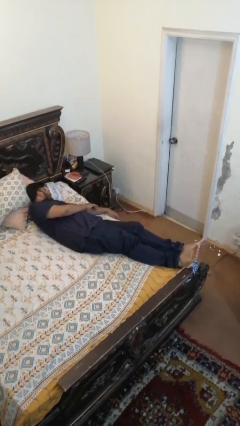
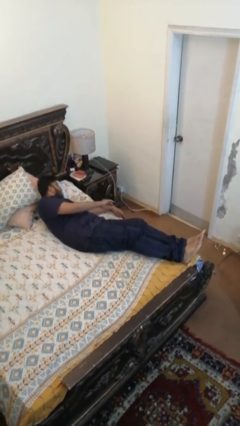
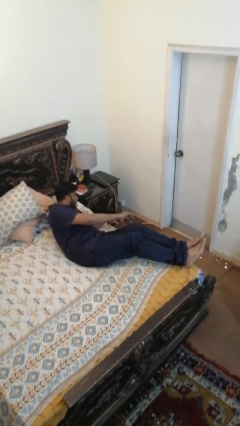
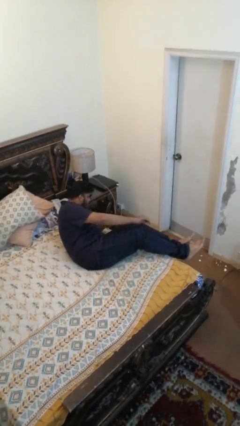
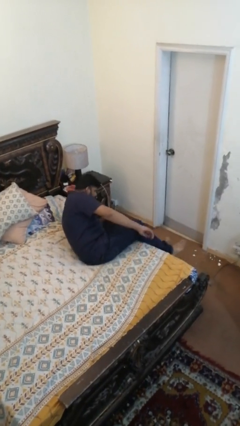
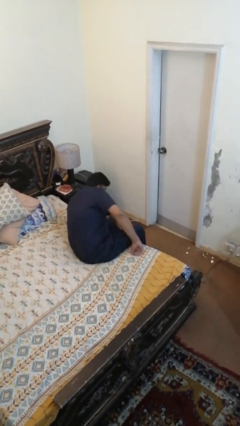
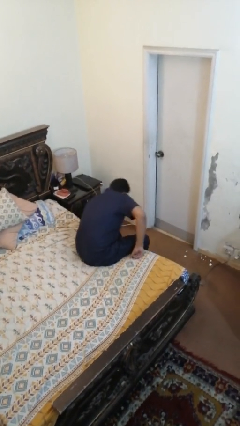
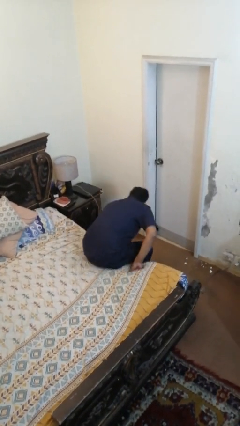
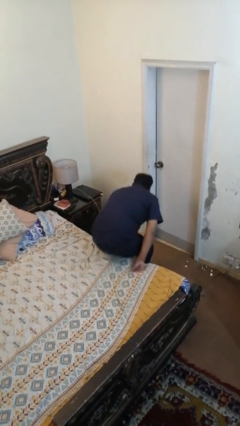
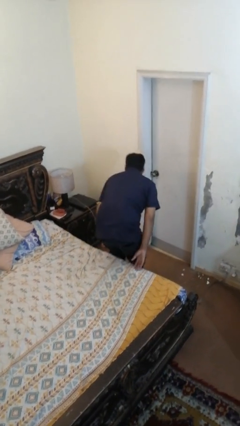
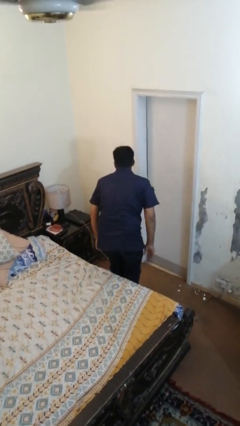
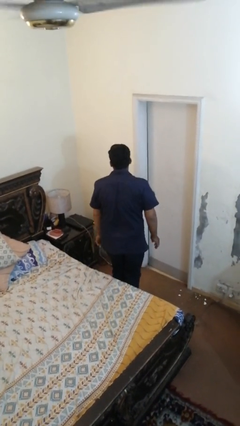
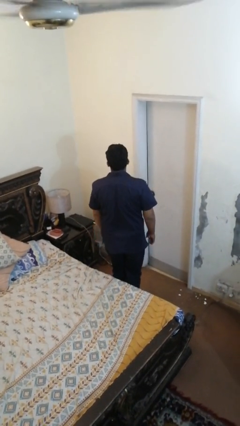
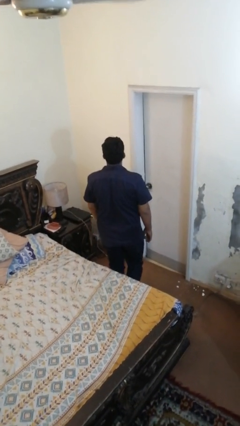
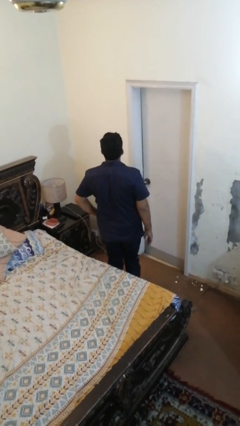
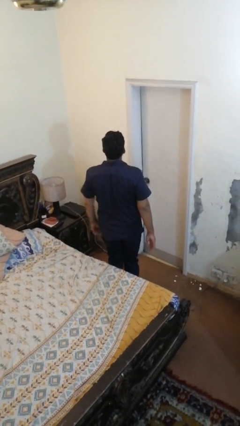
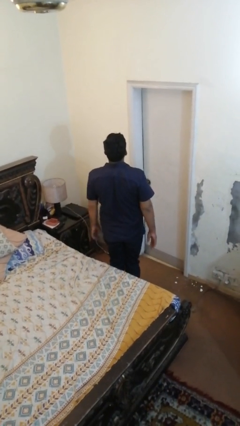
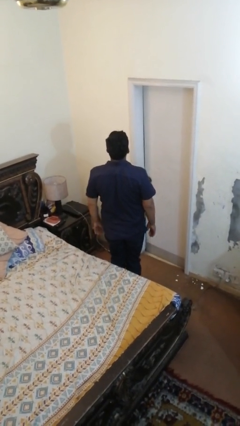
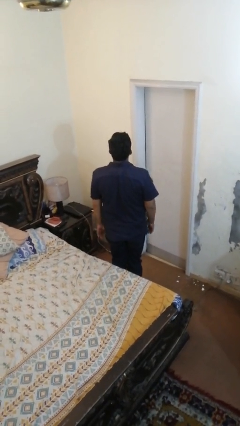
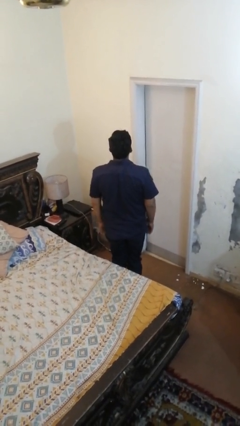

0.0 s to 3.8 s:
person stands up

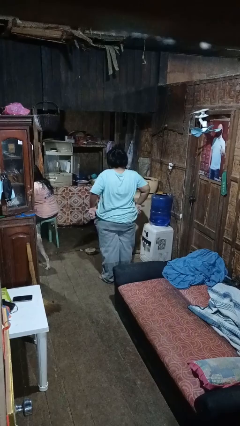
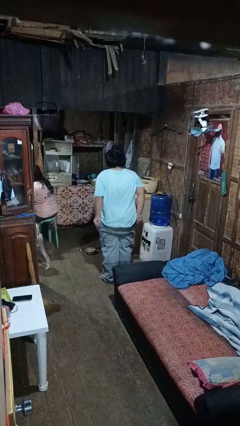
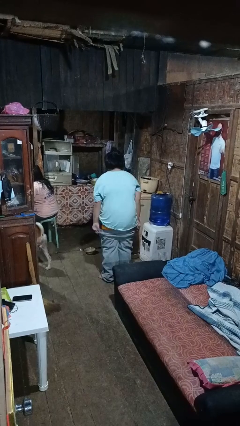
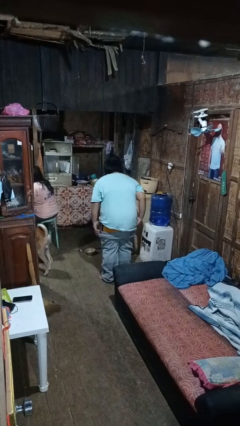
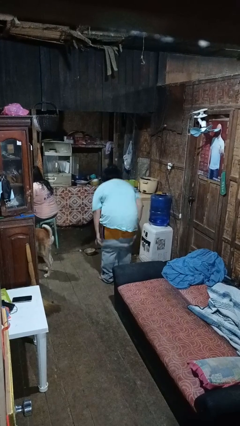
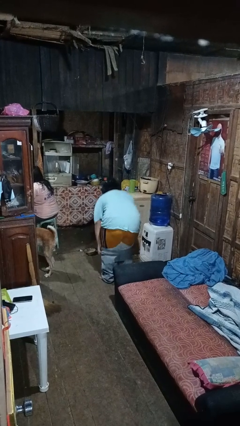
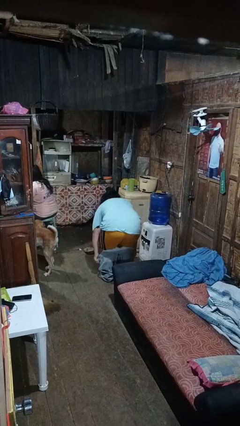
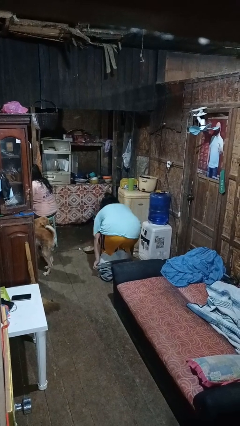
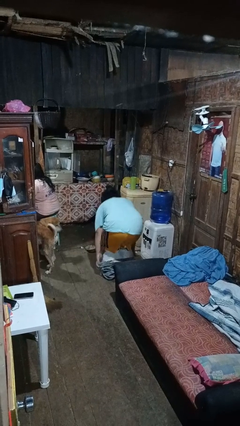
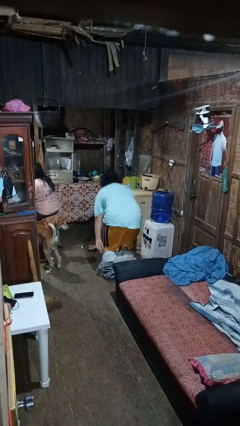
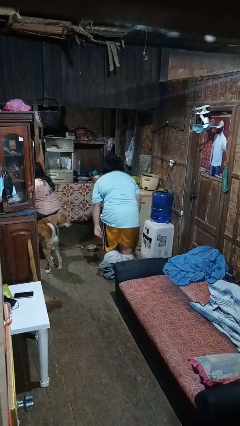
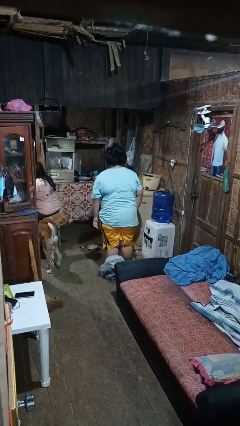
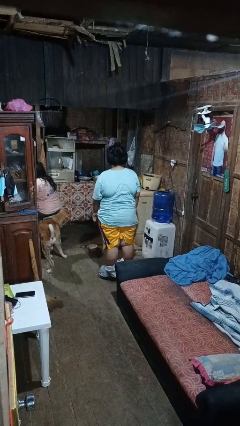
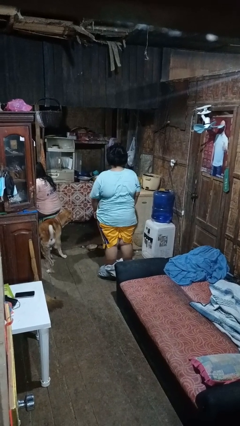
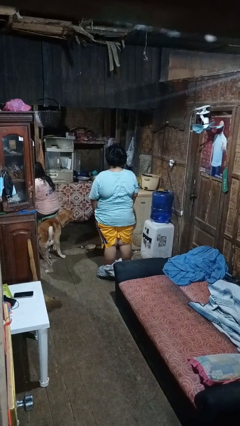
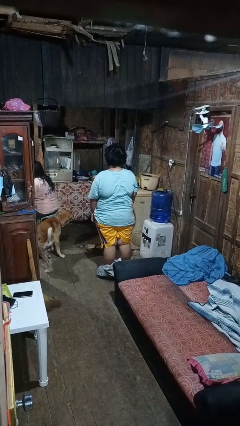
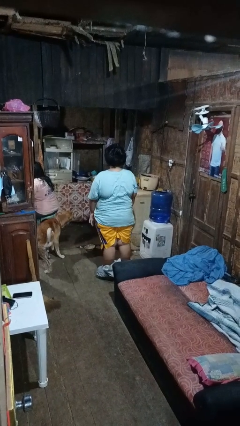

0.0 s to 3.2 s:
person takes off pants

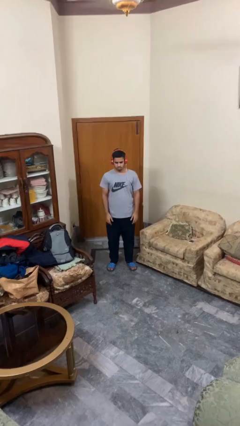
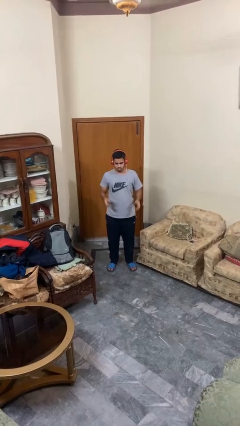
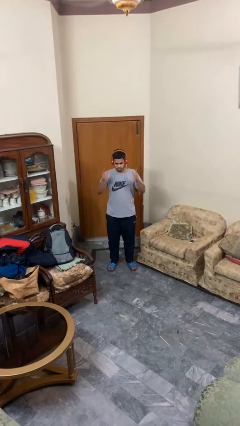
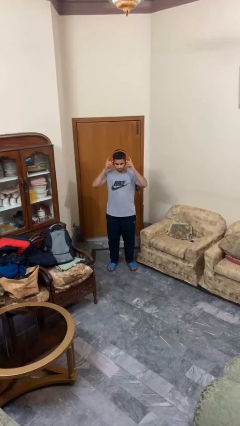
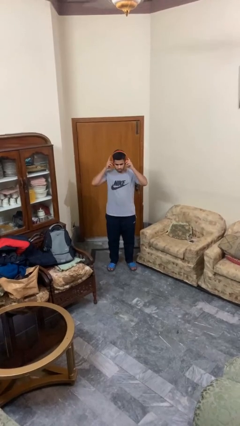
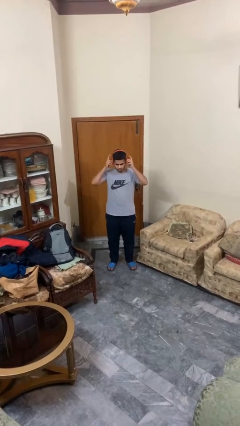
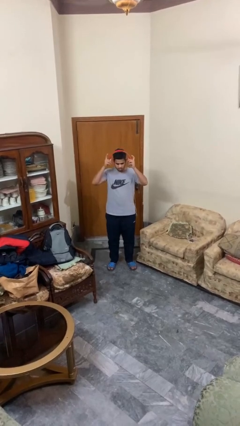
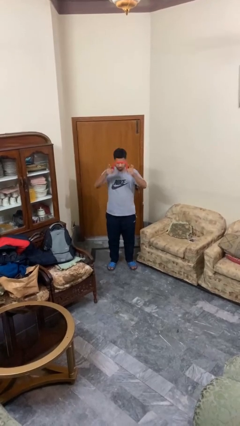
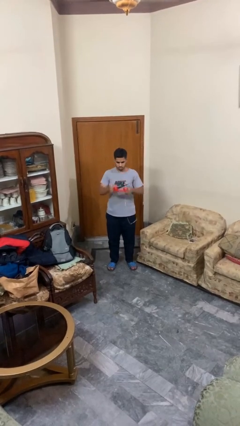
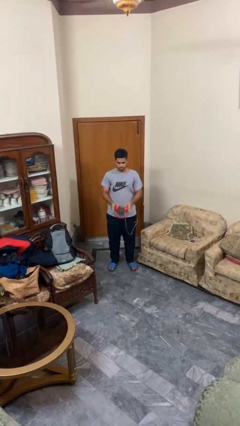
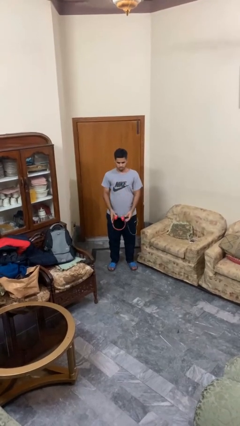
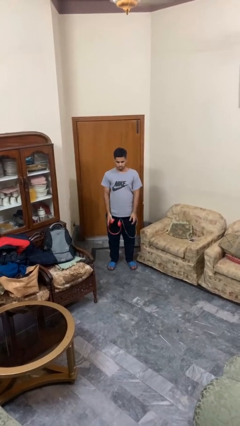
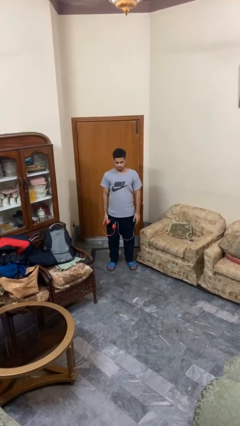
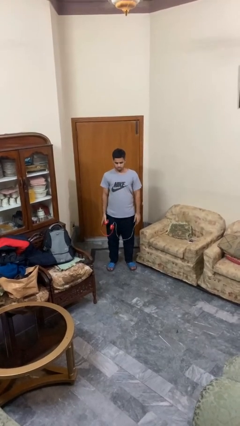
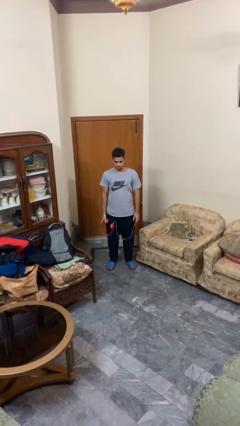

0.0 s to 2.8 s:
person takes off headphones

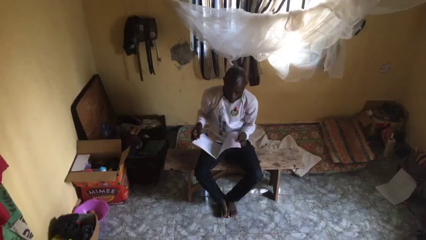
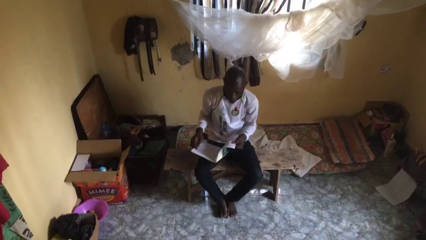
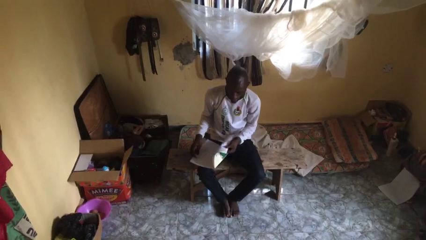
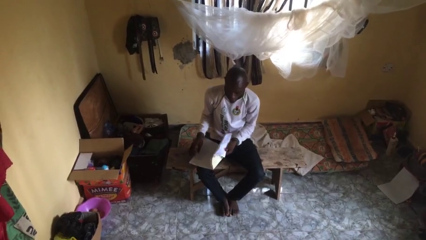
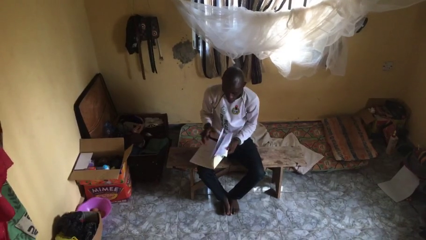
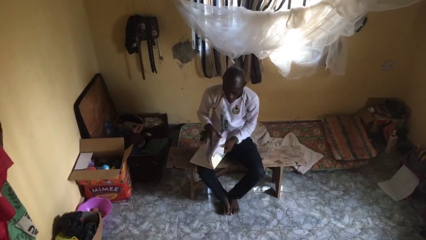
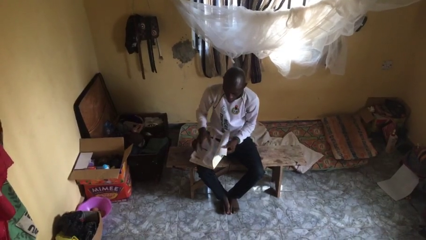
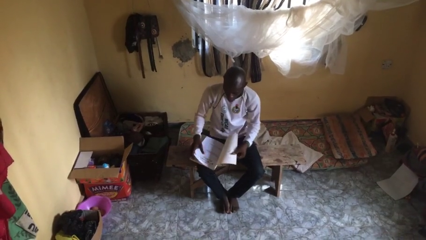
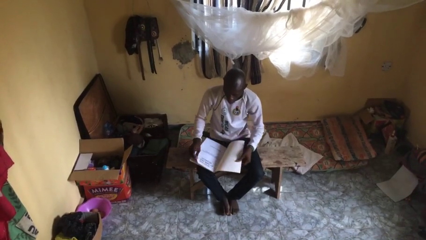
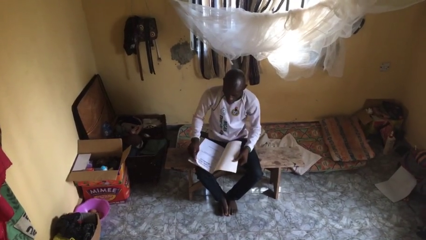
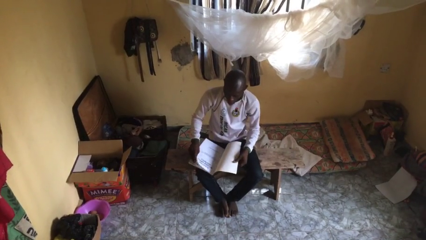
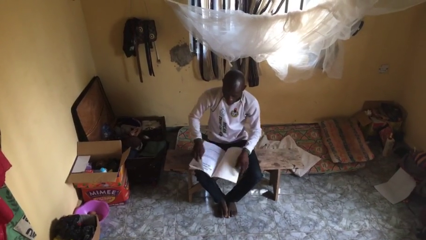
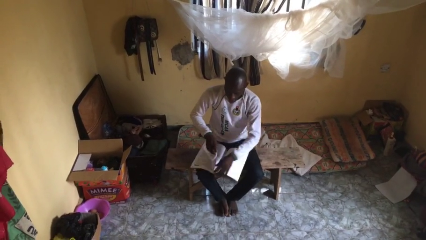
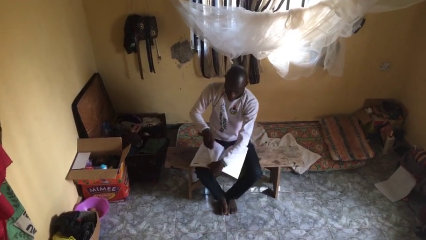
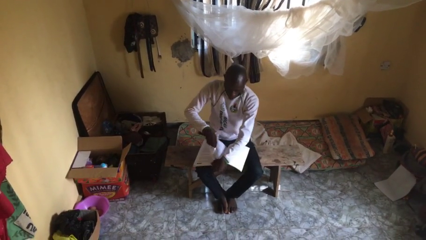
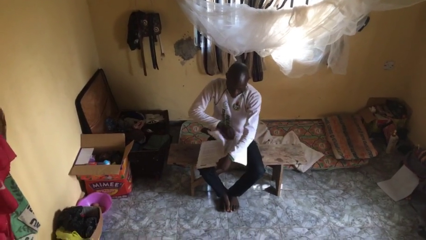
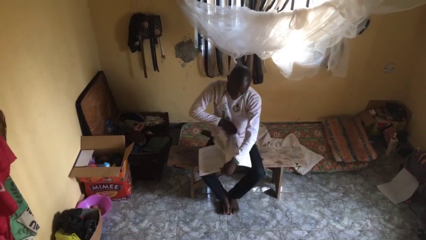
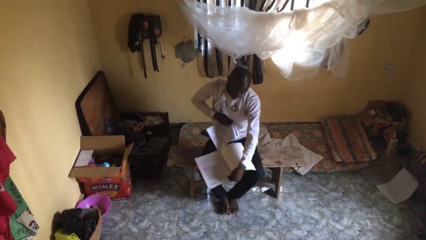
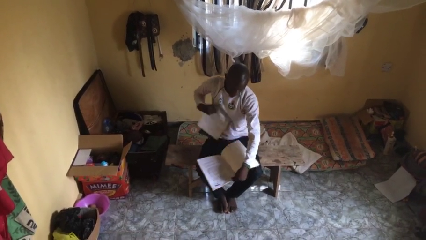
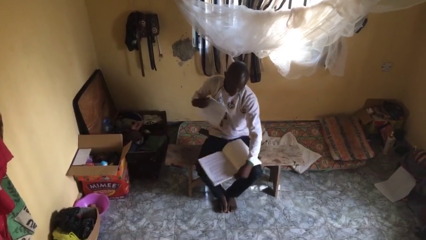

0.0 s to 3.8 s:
person tears paper

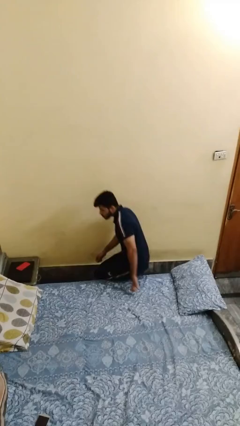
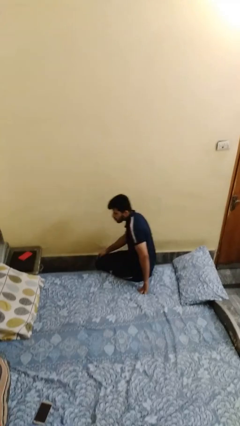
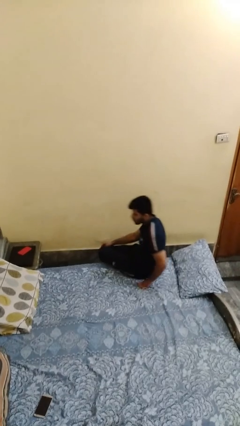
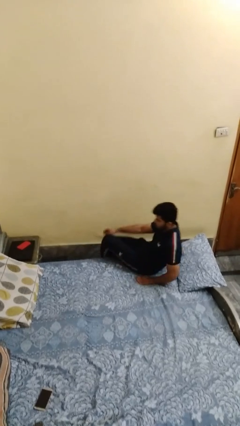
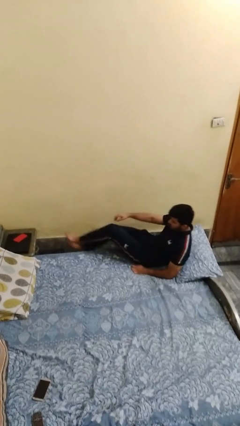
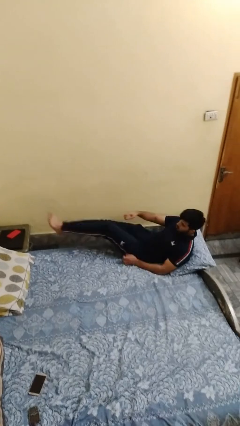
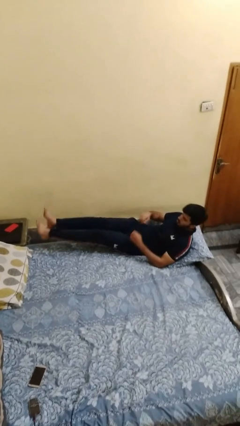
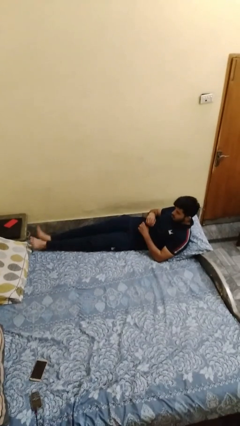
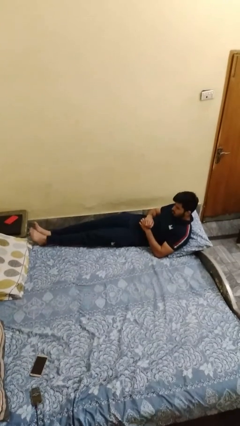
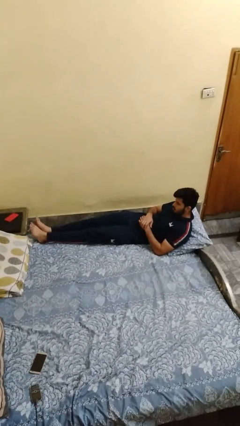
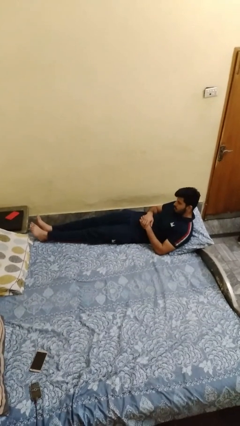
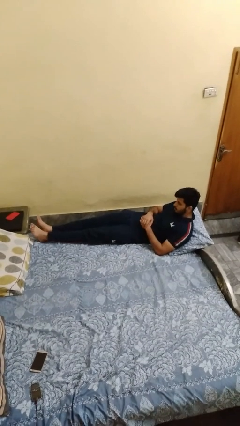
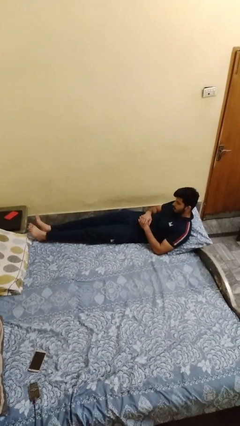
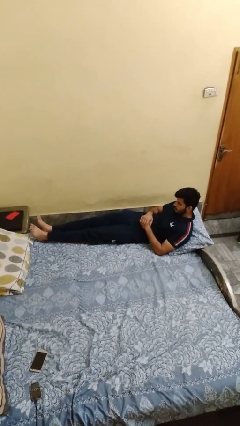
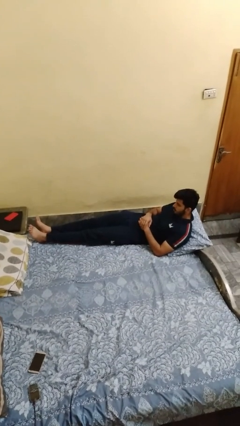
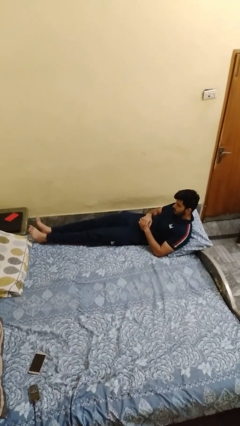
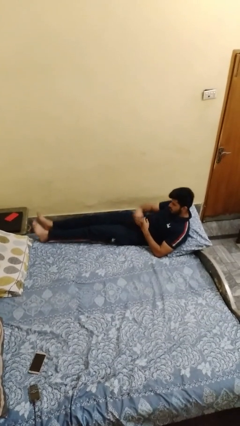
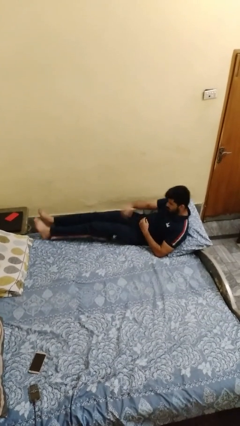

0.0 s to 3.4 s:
person lies down on bed

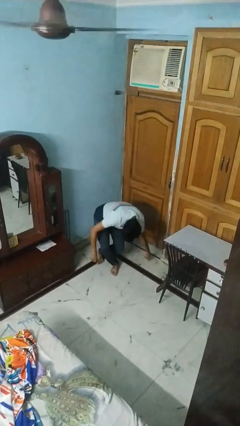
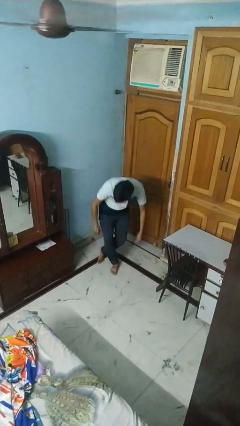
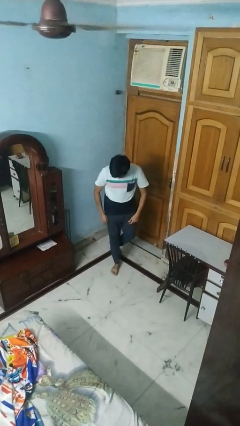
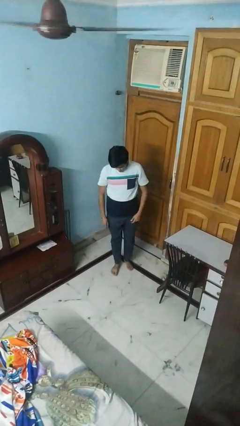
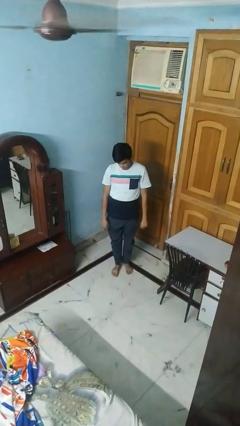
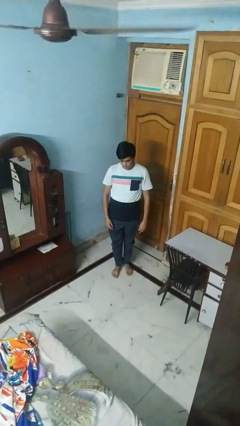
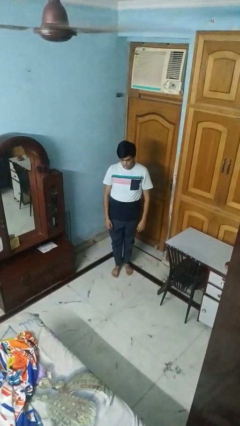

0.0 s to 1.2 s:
person stands up from floor
